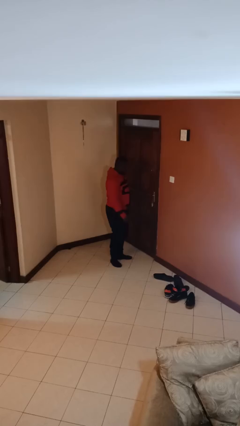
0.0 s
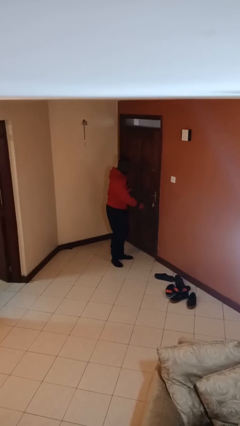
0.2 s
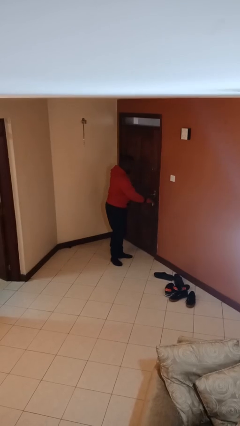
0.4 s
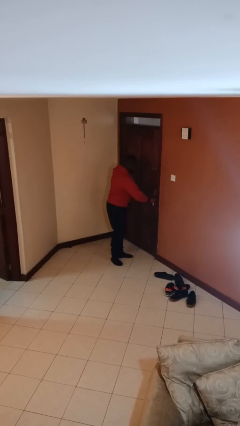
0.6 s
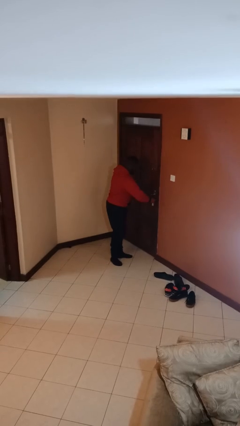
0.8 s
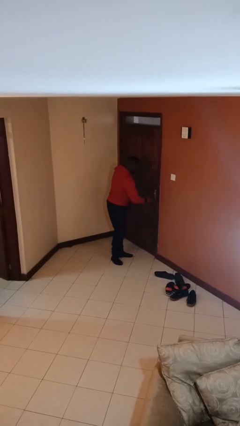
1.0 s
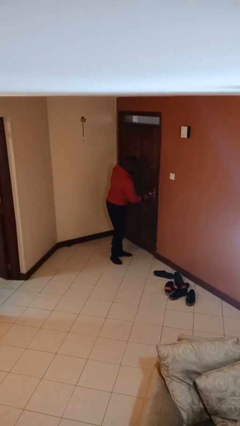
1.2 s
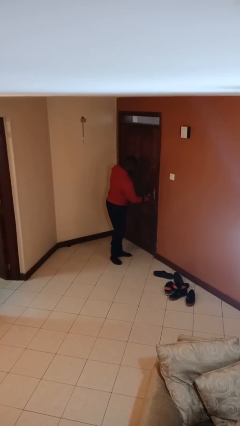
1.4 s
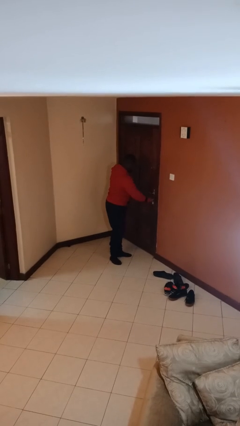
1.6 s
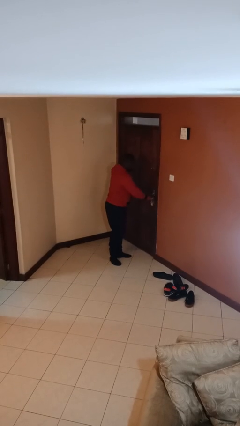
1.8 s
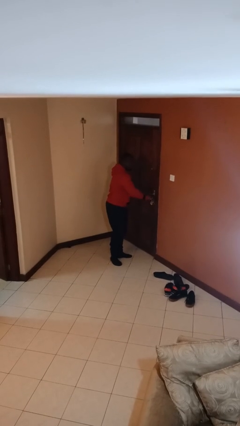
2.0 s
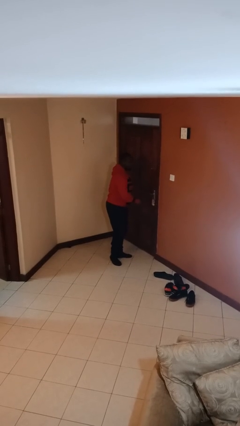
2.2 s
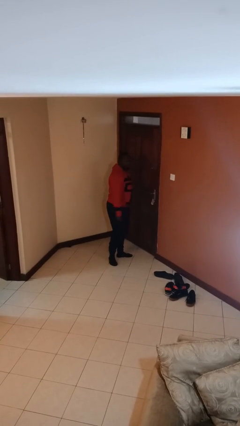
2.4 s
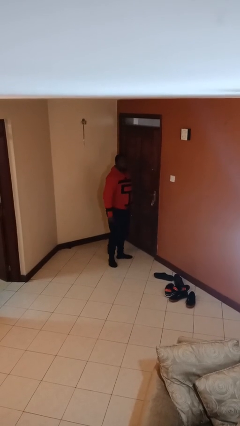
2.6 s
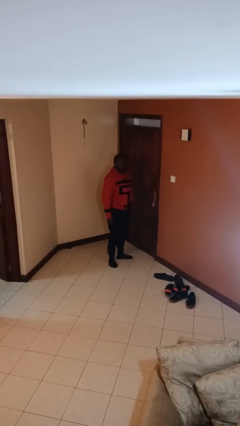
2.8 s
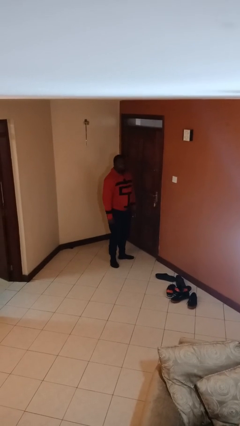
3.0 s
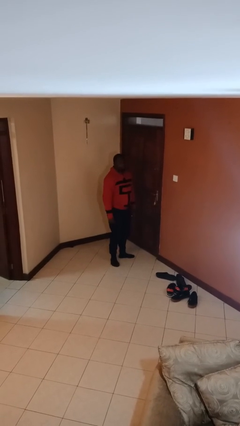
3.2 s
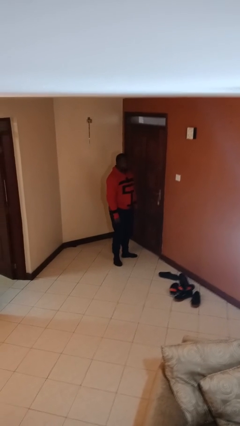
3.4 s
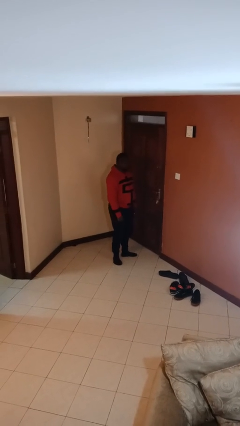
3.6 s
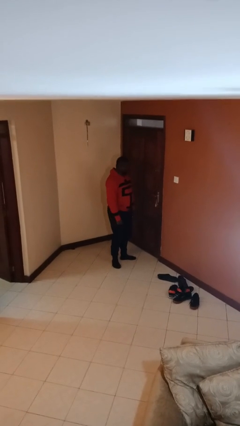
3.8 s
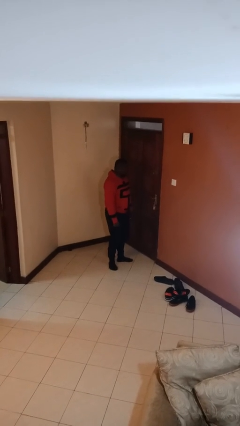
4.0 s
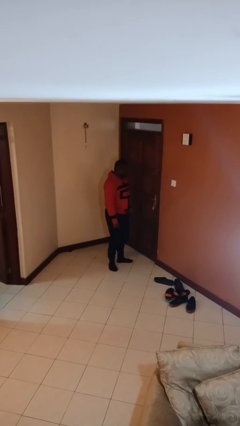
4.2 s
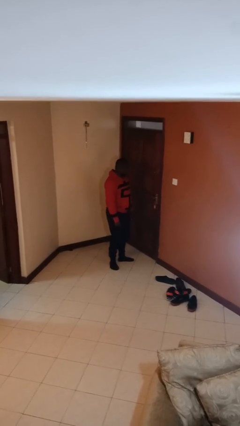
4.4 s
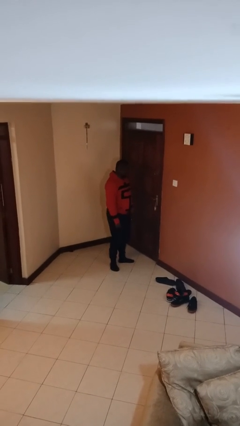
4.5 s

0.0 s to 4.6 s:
person locks door with keys

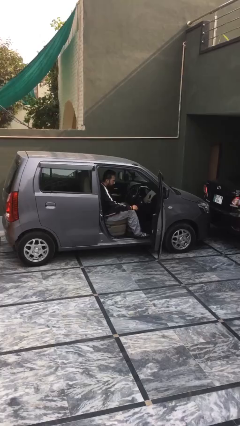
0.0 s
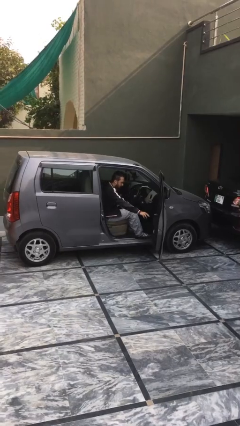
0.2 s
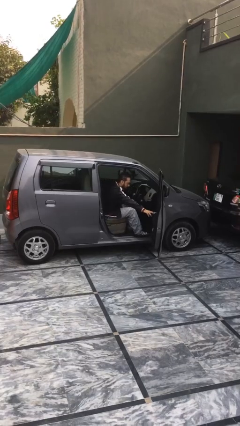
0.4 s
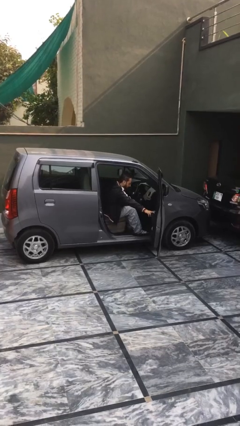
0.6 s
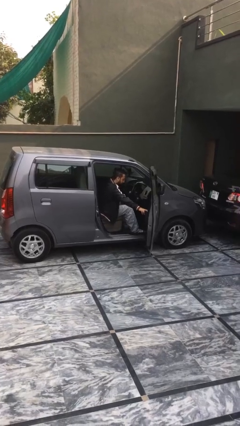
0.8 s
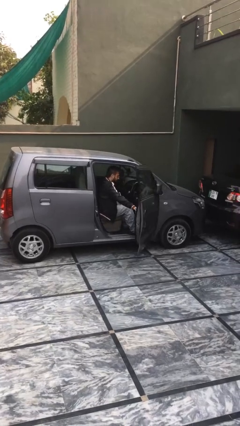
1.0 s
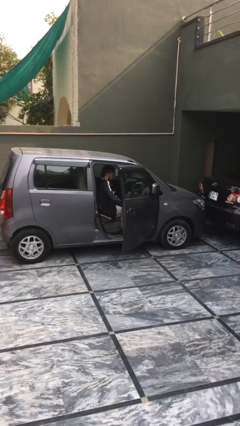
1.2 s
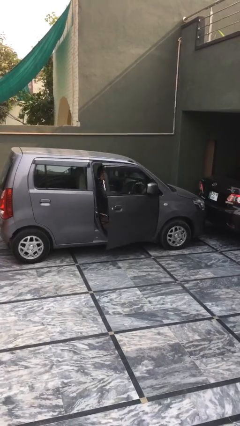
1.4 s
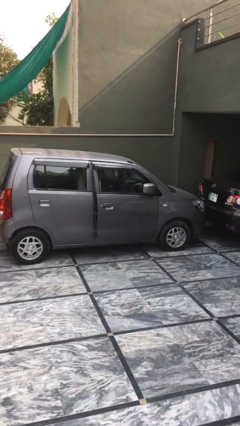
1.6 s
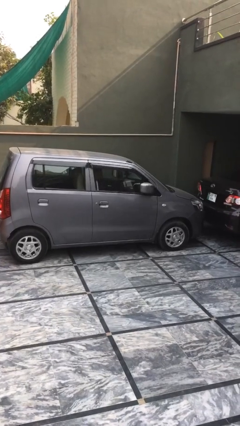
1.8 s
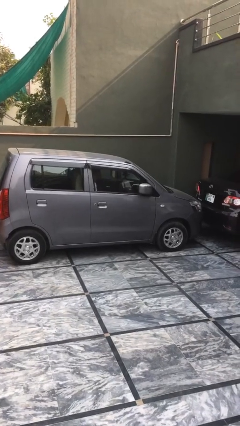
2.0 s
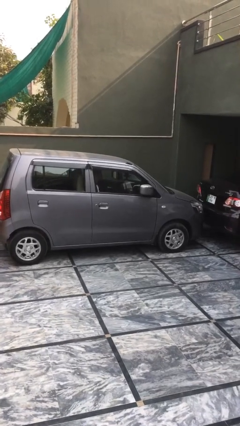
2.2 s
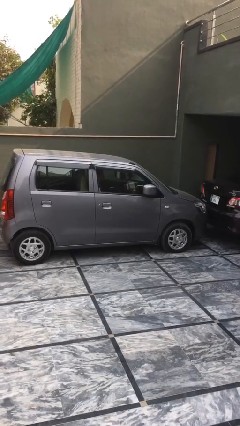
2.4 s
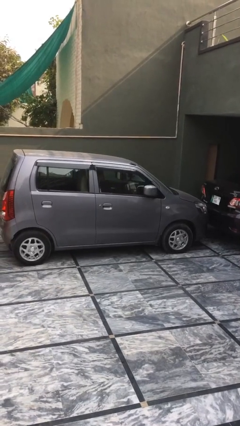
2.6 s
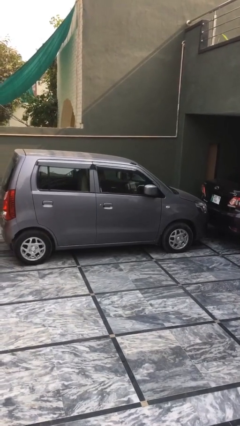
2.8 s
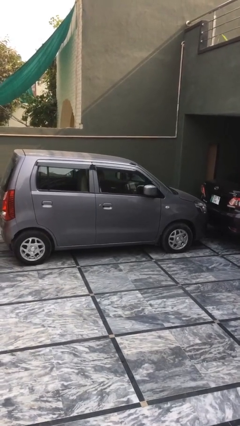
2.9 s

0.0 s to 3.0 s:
person closes car door

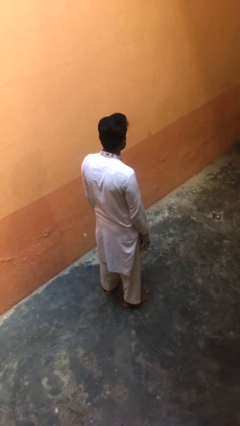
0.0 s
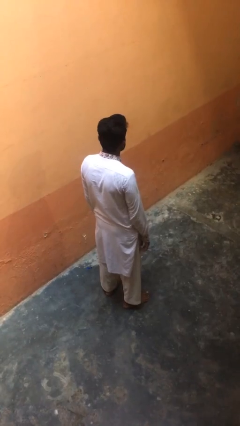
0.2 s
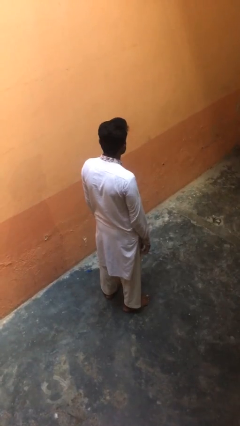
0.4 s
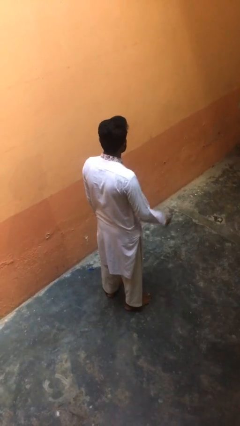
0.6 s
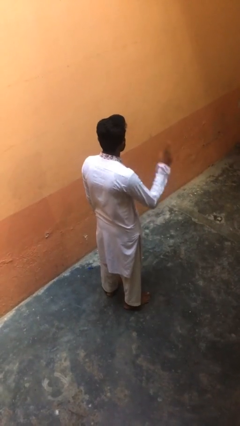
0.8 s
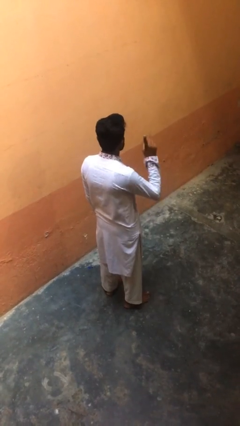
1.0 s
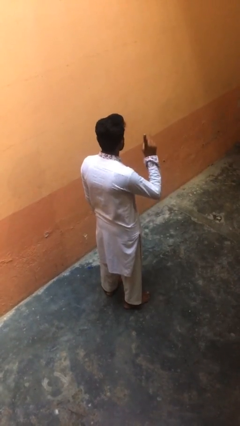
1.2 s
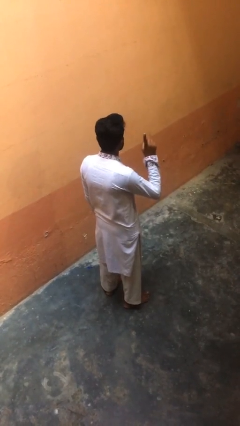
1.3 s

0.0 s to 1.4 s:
person gestures number one

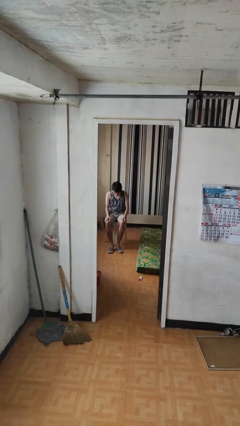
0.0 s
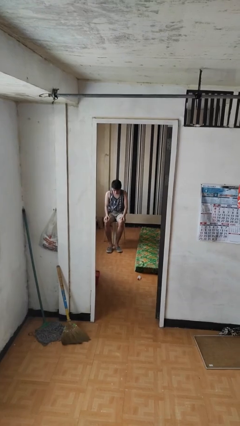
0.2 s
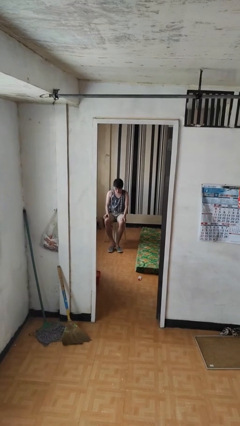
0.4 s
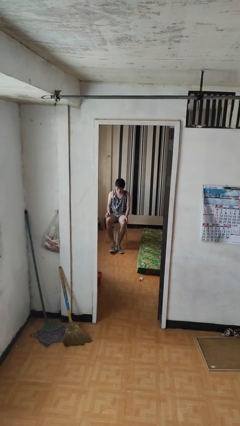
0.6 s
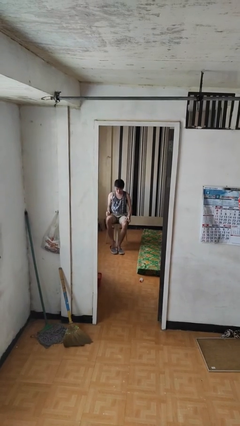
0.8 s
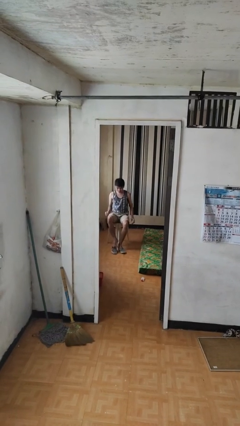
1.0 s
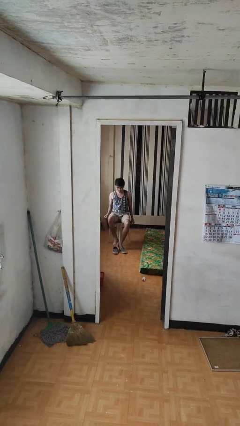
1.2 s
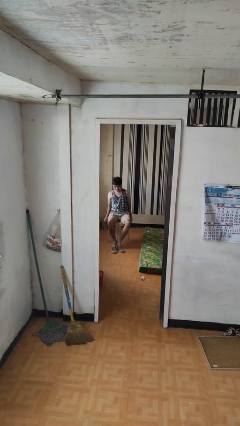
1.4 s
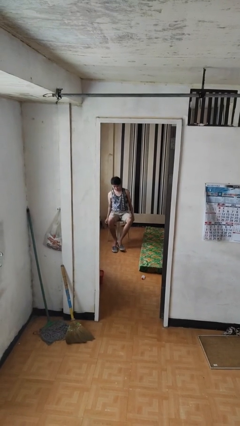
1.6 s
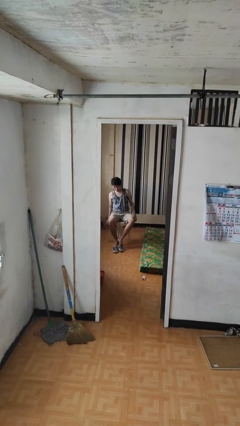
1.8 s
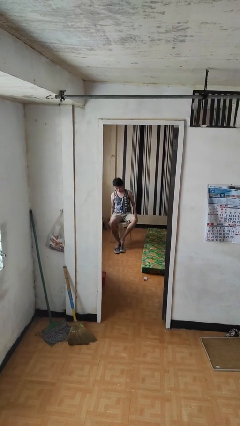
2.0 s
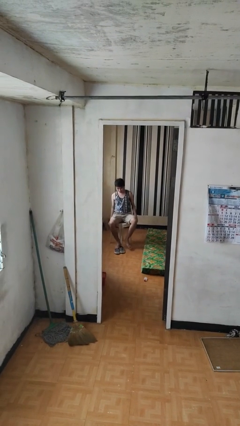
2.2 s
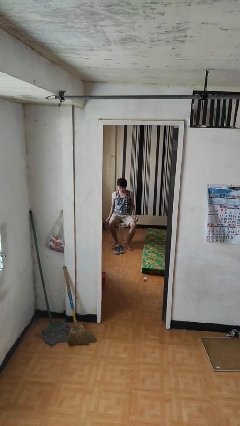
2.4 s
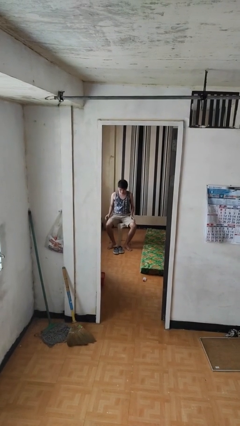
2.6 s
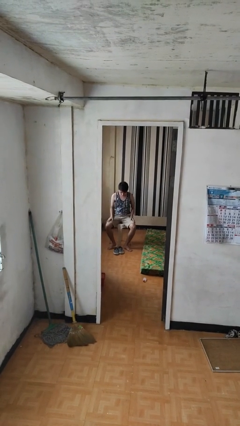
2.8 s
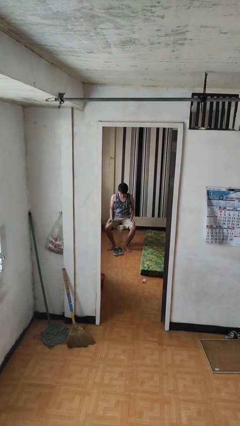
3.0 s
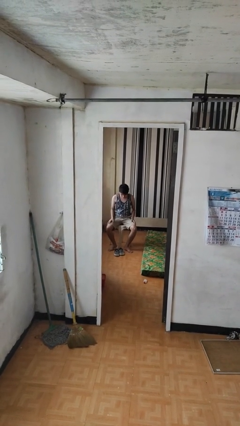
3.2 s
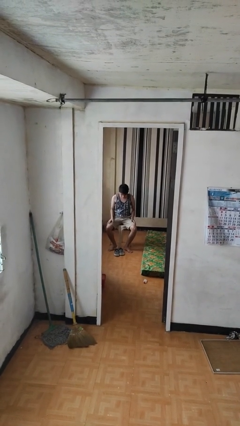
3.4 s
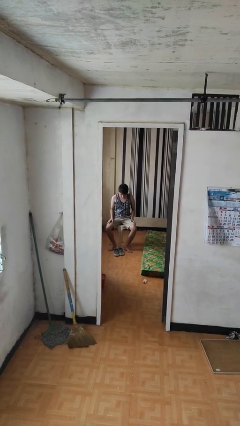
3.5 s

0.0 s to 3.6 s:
person takes off shoes

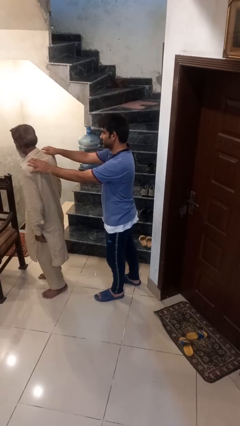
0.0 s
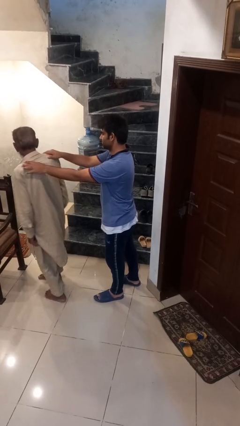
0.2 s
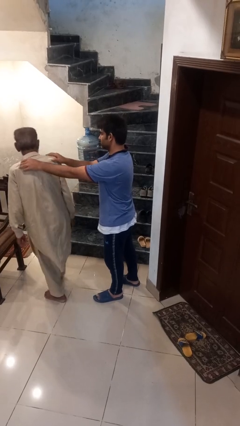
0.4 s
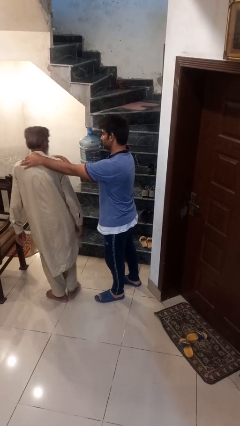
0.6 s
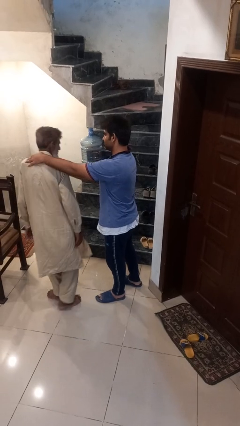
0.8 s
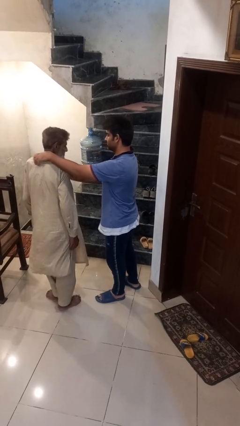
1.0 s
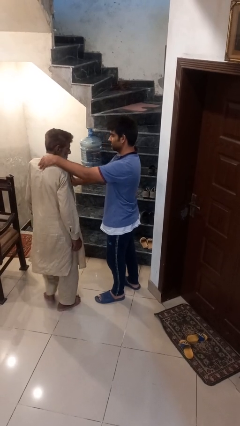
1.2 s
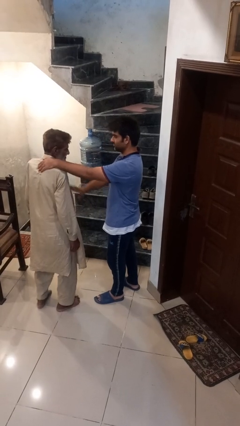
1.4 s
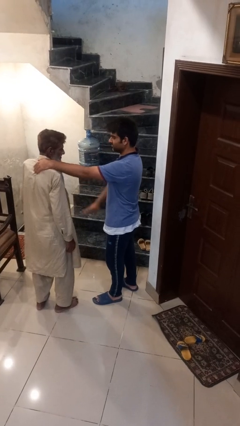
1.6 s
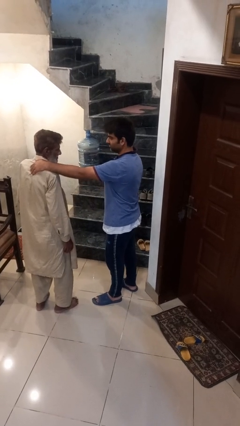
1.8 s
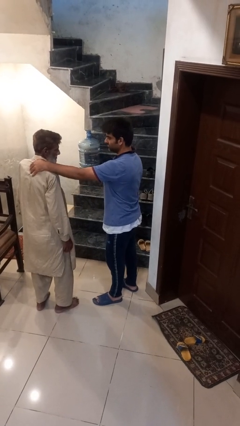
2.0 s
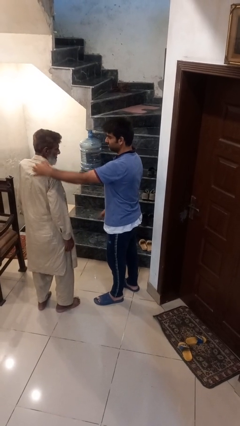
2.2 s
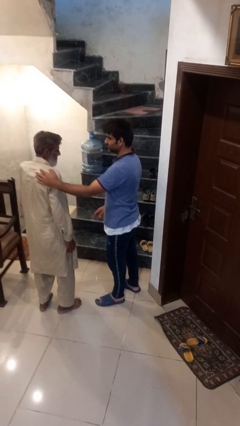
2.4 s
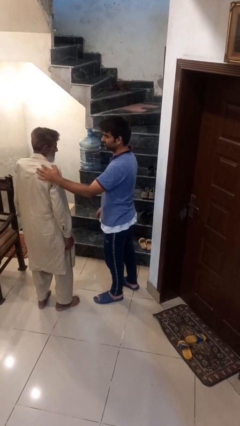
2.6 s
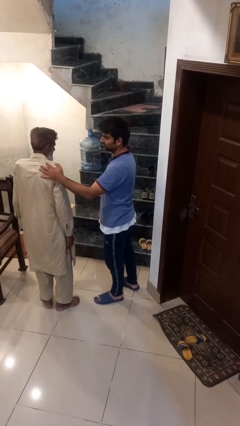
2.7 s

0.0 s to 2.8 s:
person spins person around

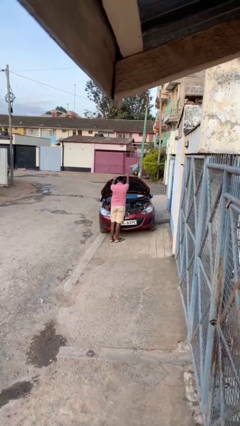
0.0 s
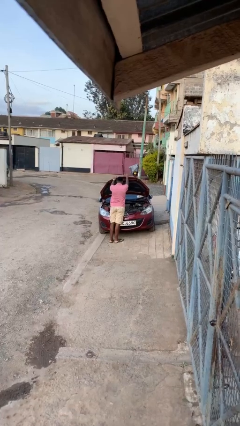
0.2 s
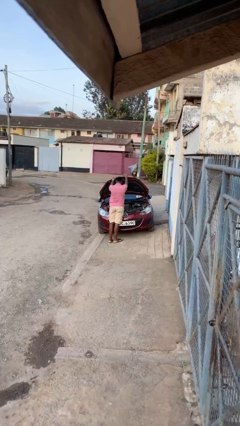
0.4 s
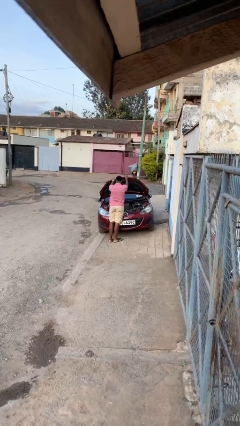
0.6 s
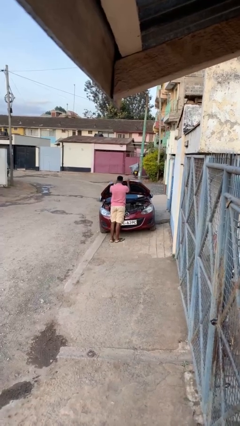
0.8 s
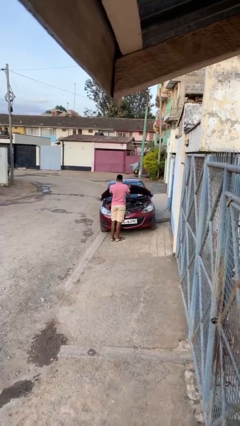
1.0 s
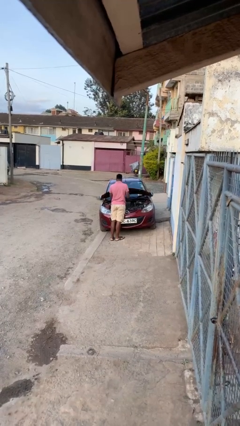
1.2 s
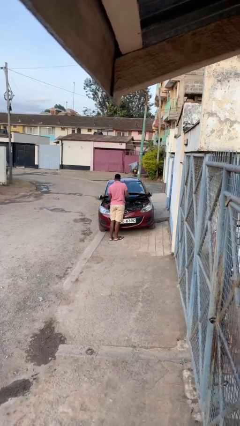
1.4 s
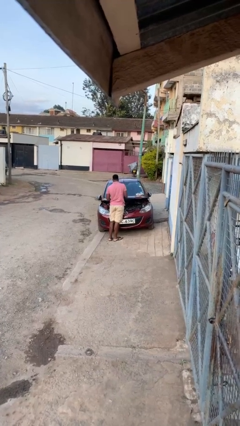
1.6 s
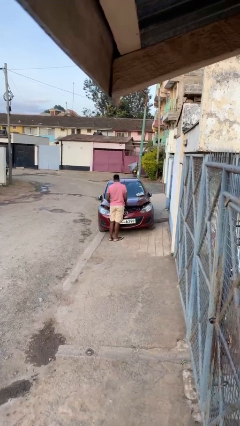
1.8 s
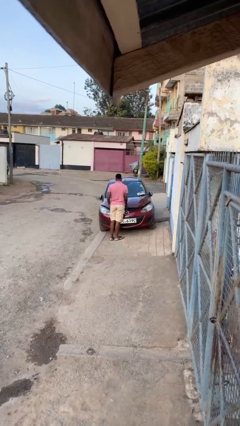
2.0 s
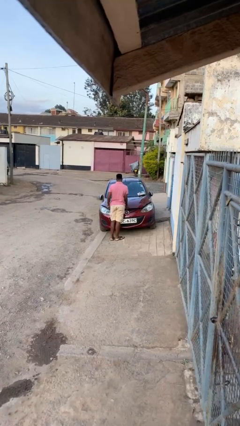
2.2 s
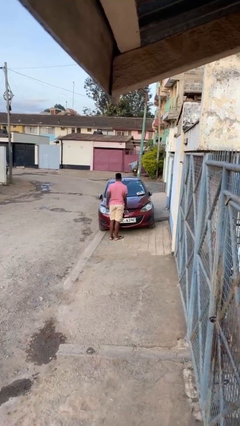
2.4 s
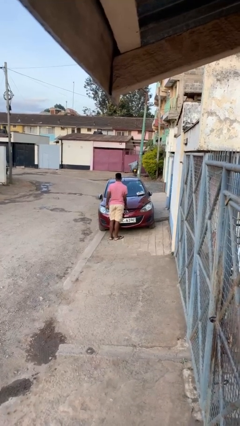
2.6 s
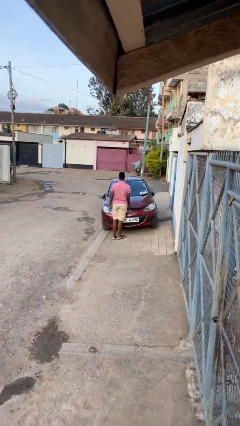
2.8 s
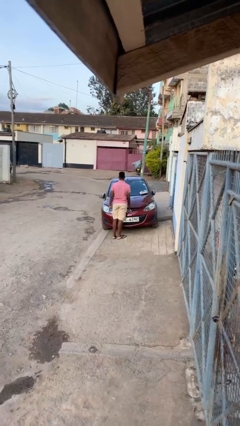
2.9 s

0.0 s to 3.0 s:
person closes car hood
